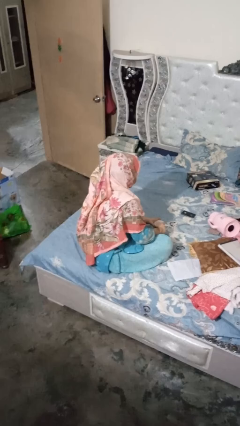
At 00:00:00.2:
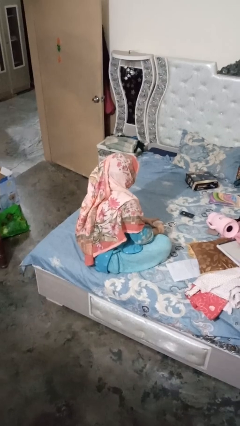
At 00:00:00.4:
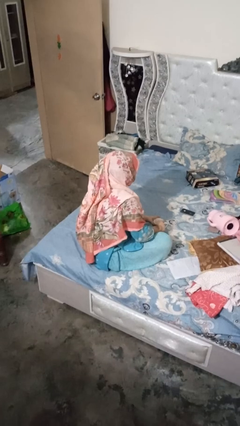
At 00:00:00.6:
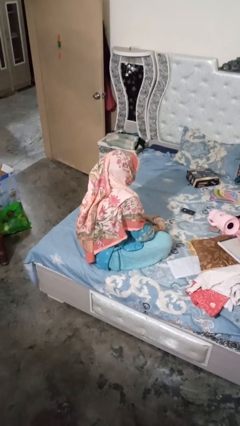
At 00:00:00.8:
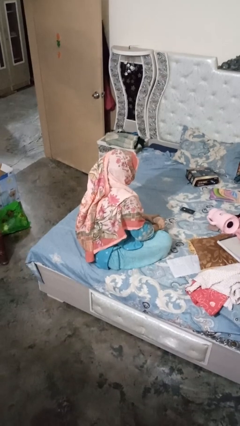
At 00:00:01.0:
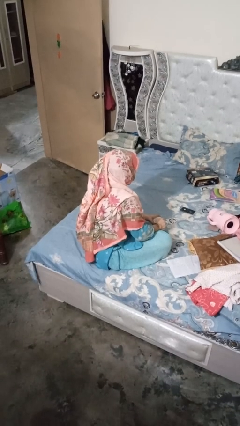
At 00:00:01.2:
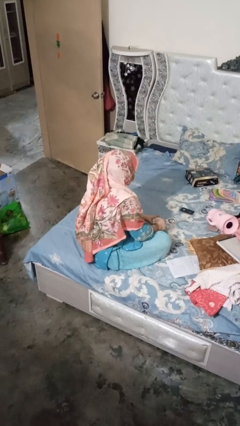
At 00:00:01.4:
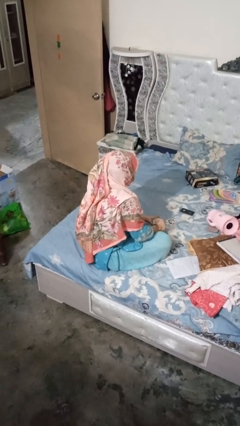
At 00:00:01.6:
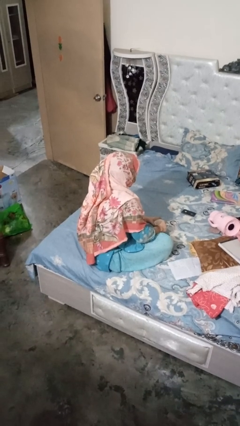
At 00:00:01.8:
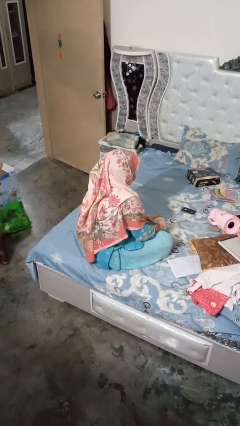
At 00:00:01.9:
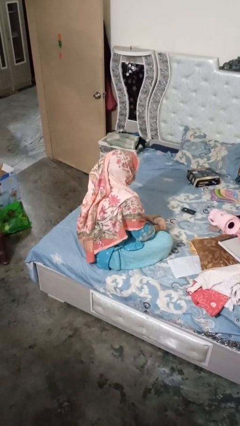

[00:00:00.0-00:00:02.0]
person stirs mug

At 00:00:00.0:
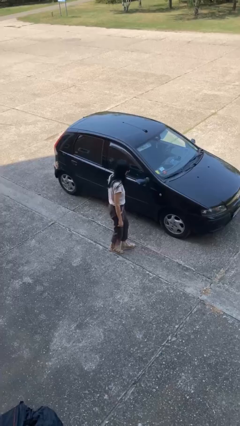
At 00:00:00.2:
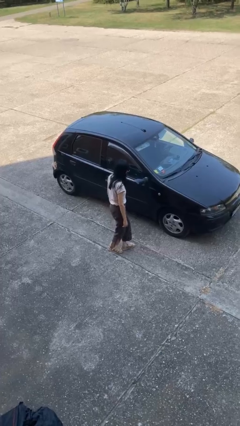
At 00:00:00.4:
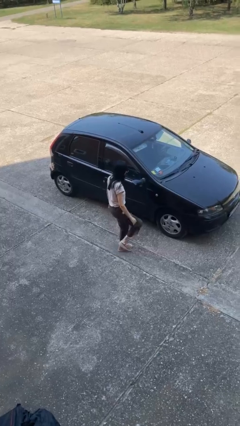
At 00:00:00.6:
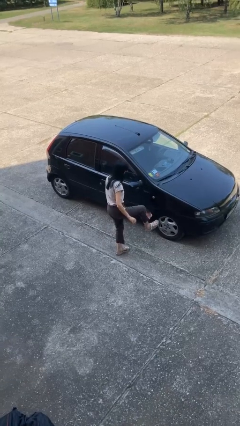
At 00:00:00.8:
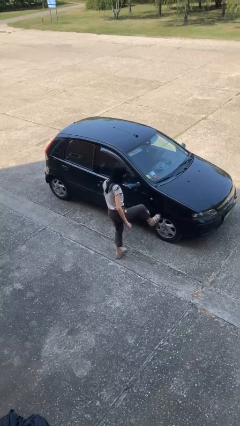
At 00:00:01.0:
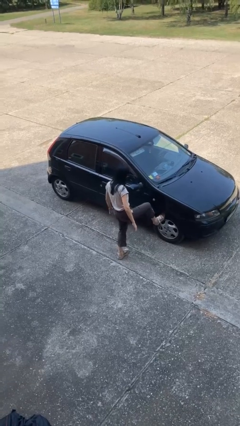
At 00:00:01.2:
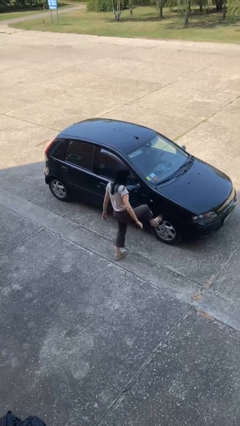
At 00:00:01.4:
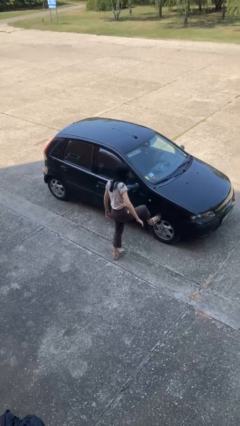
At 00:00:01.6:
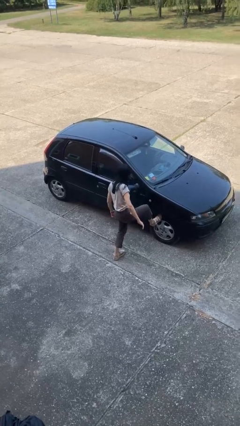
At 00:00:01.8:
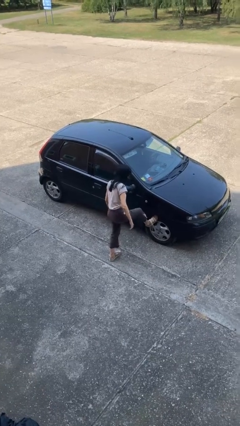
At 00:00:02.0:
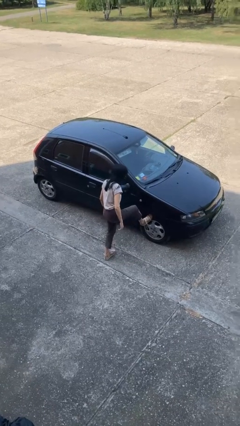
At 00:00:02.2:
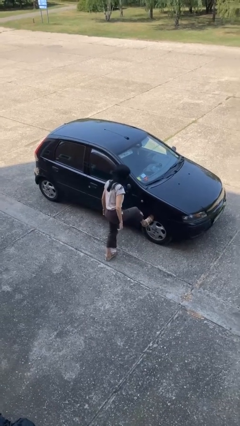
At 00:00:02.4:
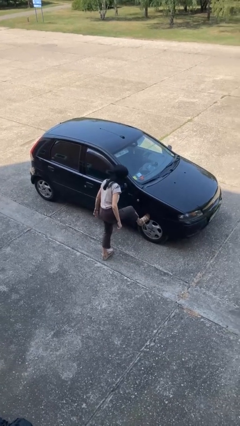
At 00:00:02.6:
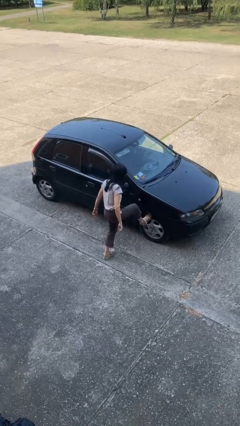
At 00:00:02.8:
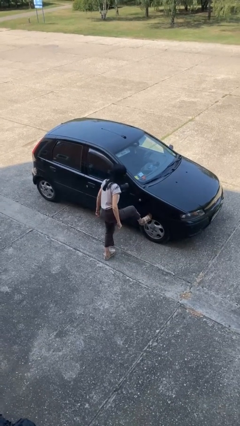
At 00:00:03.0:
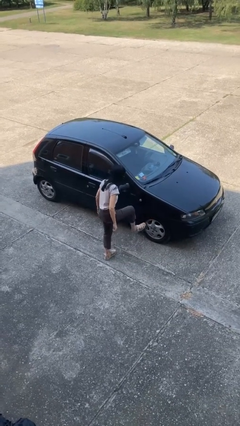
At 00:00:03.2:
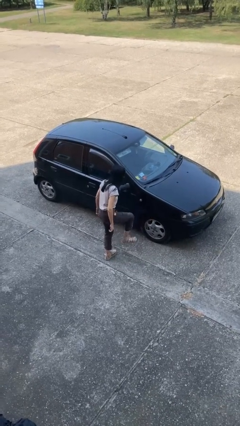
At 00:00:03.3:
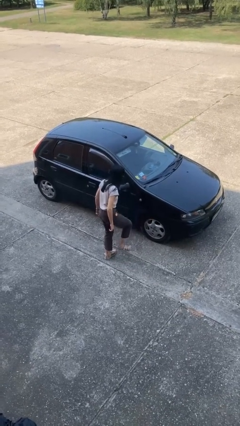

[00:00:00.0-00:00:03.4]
person kicks car tires

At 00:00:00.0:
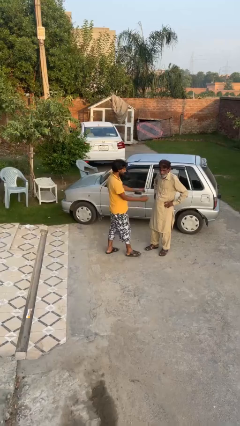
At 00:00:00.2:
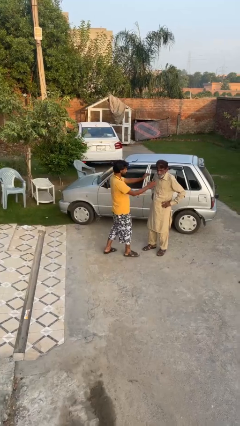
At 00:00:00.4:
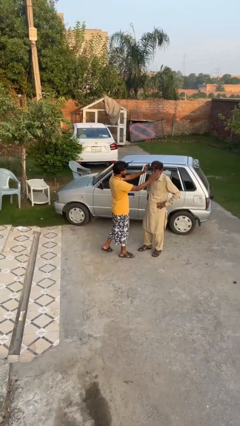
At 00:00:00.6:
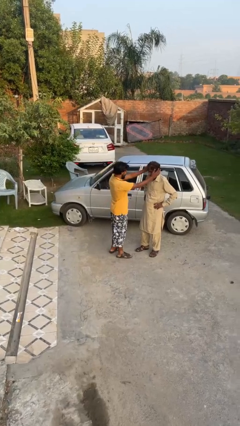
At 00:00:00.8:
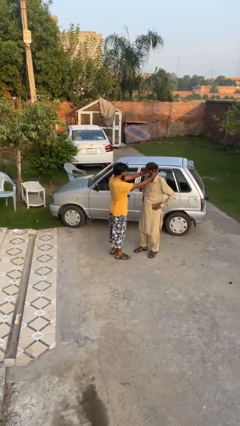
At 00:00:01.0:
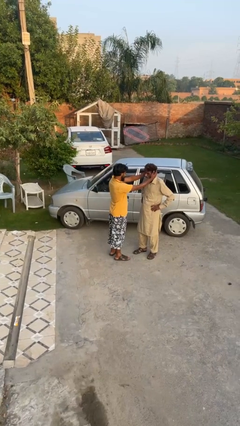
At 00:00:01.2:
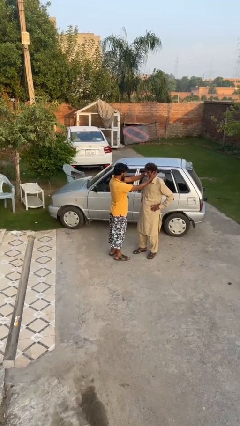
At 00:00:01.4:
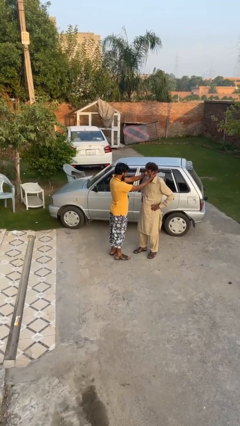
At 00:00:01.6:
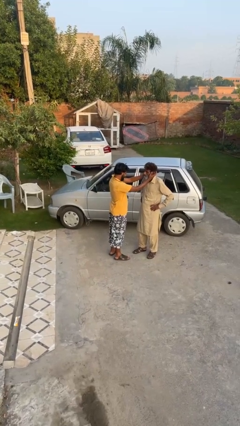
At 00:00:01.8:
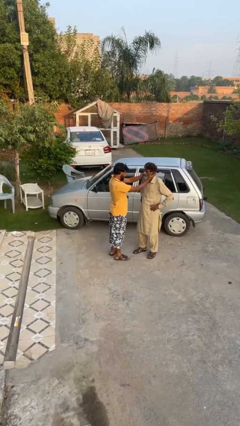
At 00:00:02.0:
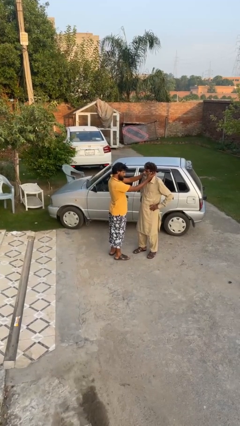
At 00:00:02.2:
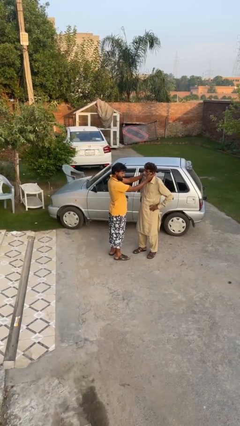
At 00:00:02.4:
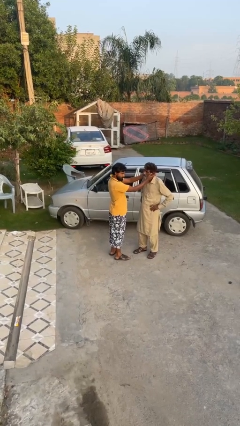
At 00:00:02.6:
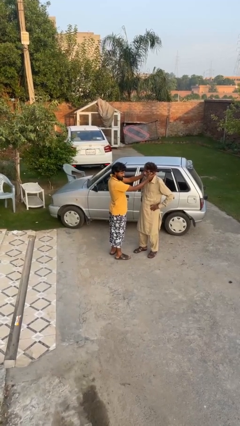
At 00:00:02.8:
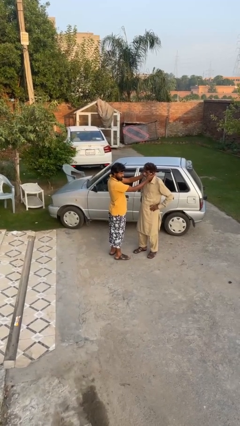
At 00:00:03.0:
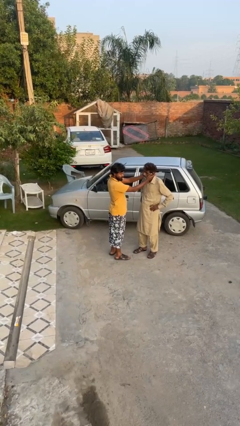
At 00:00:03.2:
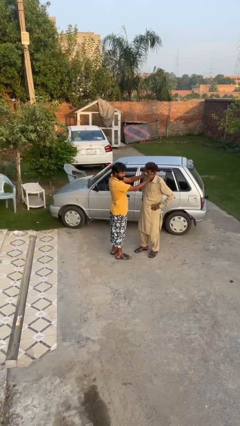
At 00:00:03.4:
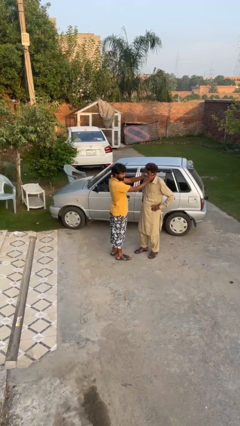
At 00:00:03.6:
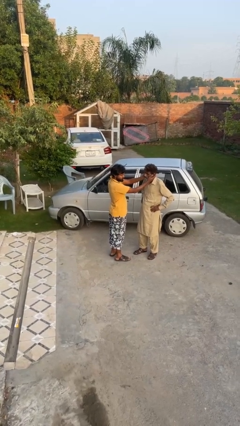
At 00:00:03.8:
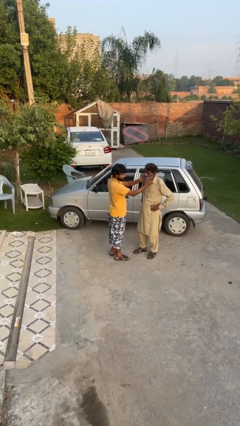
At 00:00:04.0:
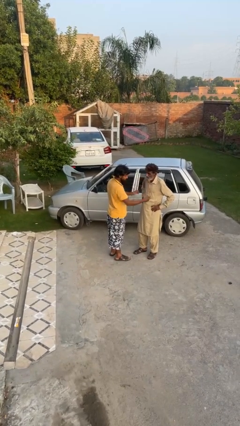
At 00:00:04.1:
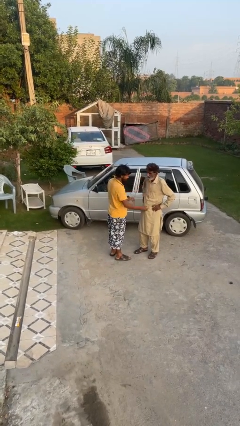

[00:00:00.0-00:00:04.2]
person touches face of person

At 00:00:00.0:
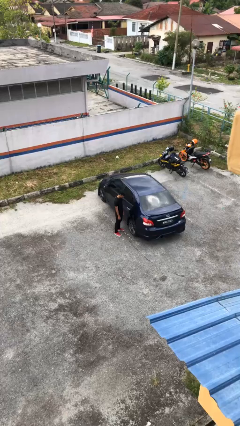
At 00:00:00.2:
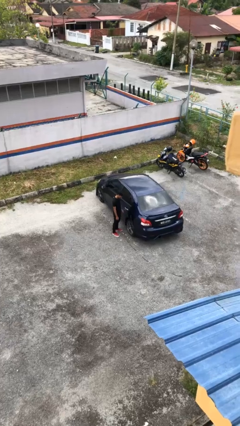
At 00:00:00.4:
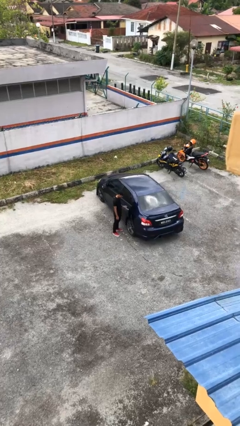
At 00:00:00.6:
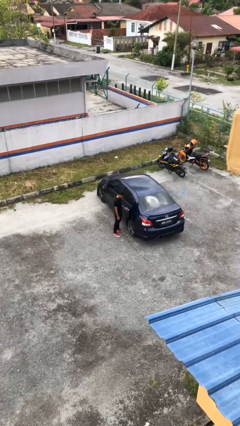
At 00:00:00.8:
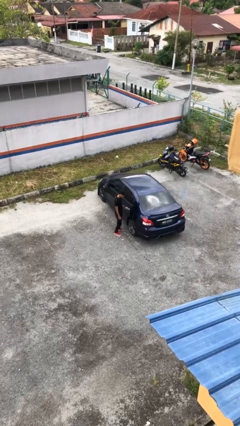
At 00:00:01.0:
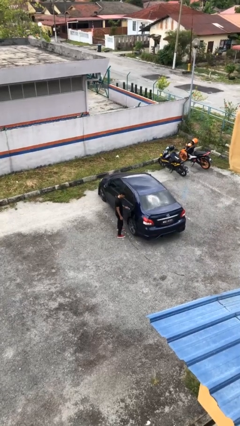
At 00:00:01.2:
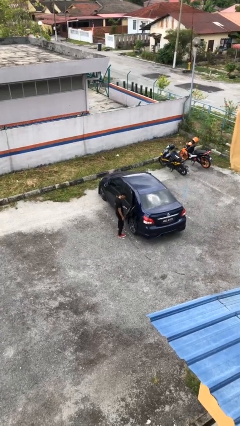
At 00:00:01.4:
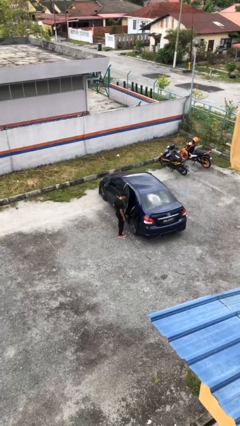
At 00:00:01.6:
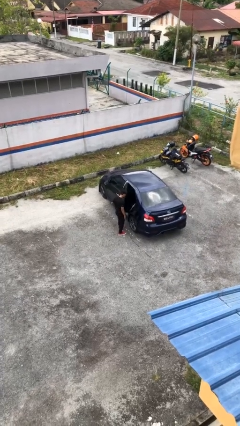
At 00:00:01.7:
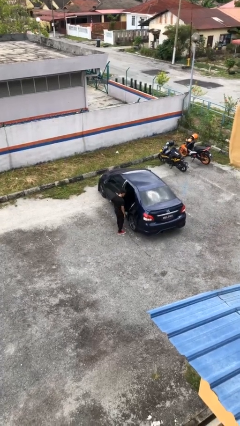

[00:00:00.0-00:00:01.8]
person opens car door

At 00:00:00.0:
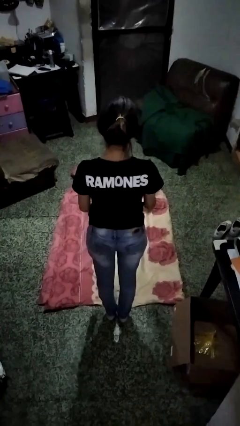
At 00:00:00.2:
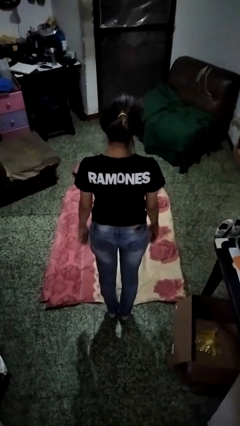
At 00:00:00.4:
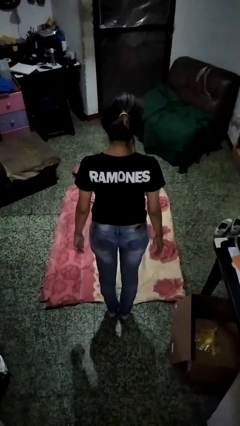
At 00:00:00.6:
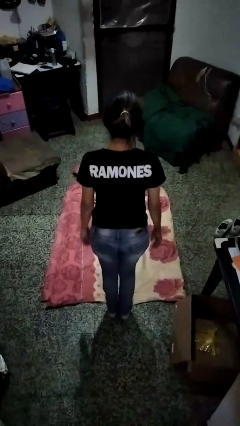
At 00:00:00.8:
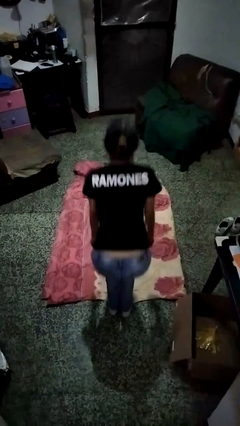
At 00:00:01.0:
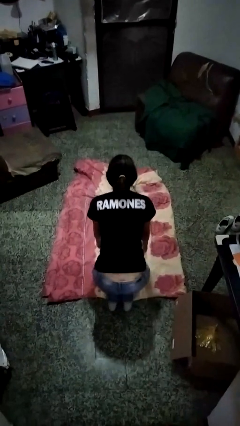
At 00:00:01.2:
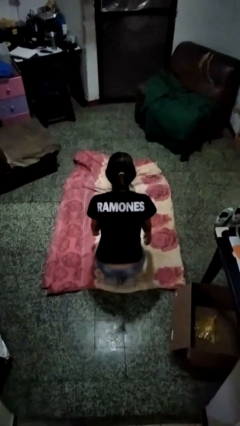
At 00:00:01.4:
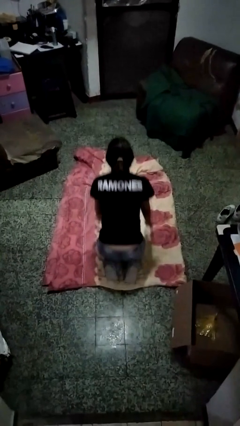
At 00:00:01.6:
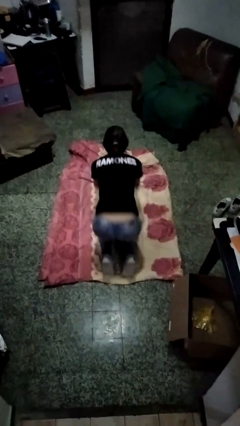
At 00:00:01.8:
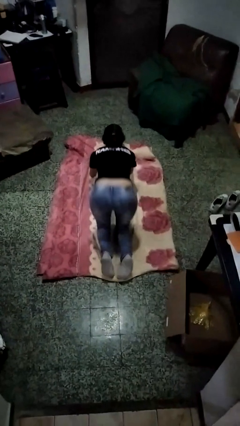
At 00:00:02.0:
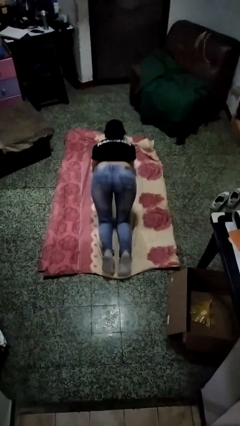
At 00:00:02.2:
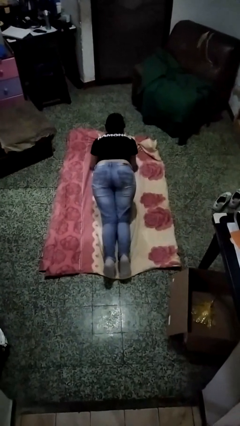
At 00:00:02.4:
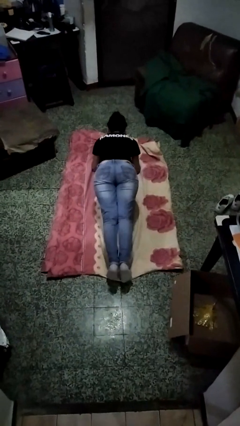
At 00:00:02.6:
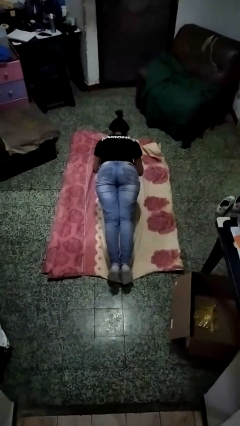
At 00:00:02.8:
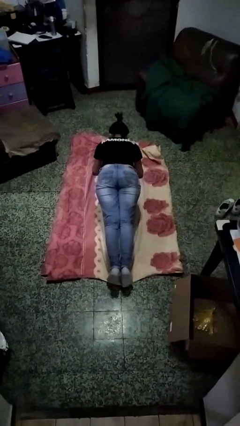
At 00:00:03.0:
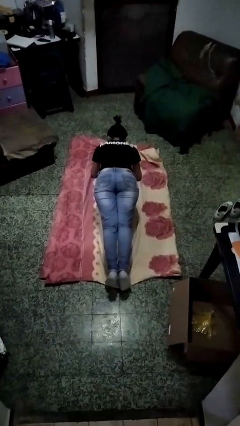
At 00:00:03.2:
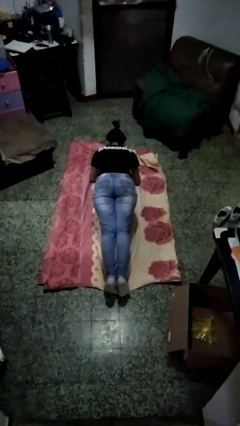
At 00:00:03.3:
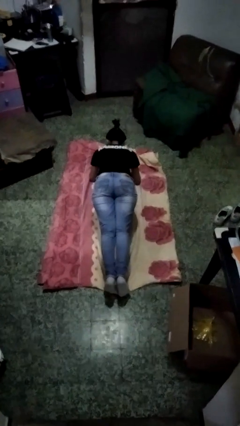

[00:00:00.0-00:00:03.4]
person exercises with plank

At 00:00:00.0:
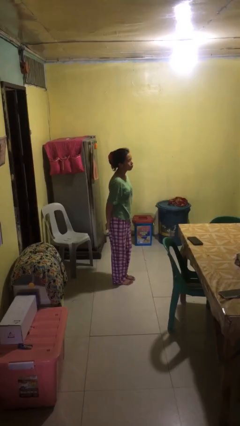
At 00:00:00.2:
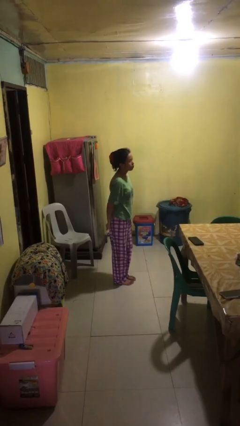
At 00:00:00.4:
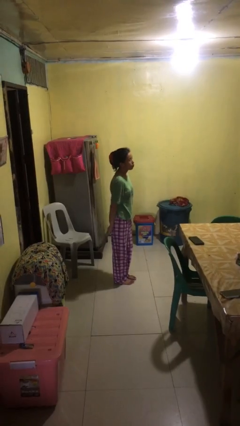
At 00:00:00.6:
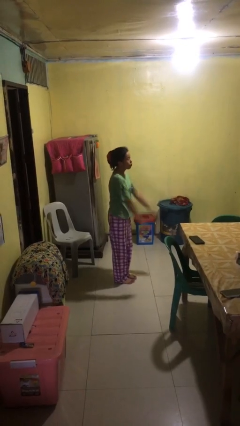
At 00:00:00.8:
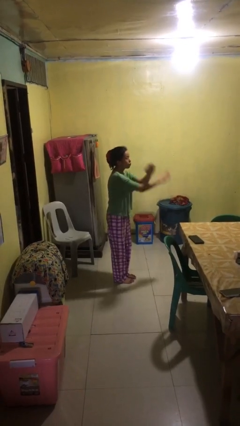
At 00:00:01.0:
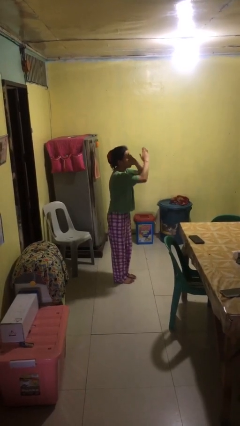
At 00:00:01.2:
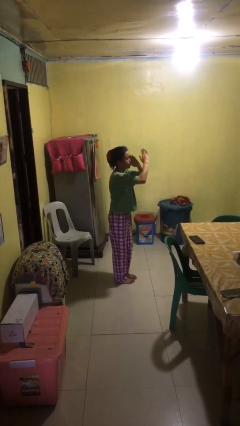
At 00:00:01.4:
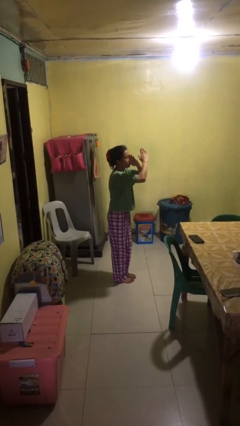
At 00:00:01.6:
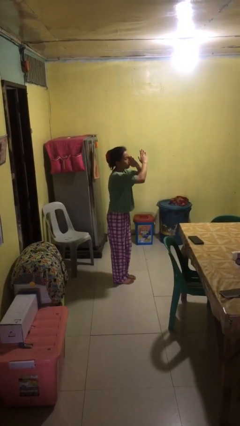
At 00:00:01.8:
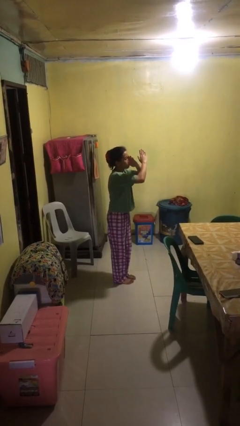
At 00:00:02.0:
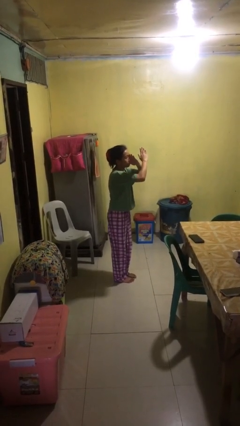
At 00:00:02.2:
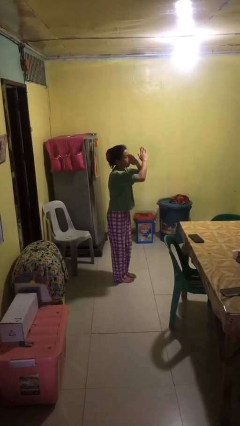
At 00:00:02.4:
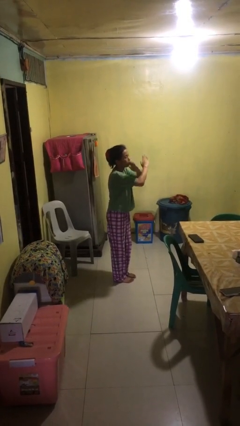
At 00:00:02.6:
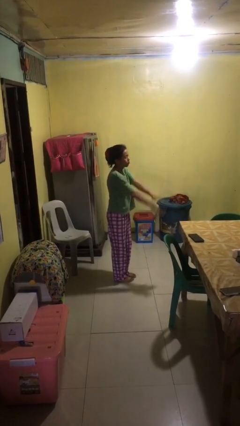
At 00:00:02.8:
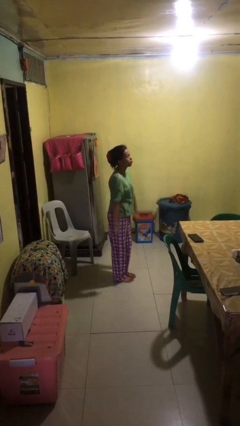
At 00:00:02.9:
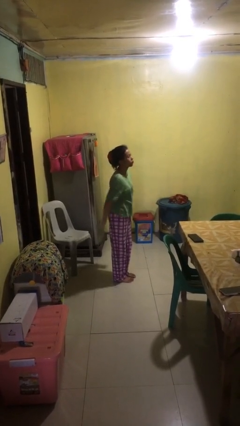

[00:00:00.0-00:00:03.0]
person gestures arms x
